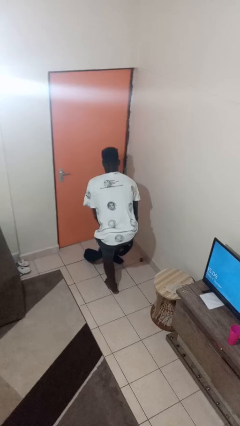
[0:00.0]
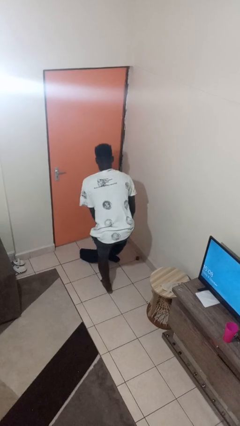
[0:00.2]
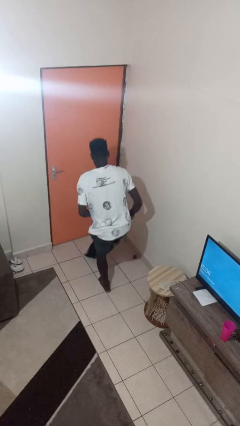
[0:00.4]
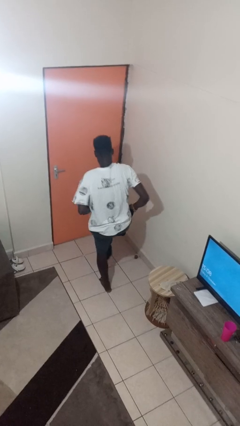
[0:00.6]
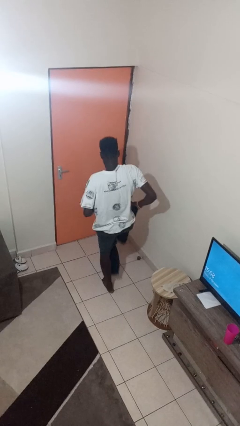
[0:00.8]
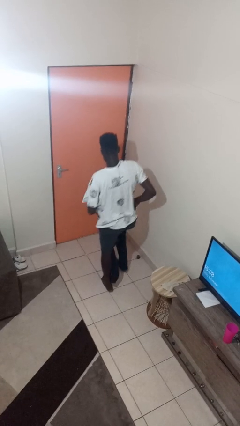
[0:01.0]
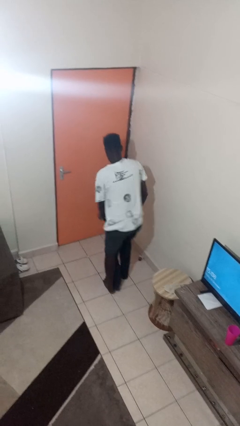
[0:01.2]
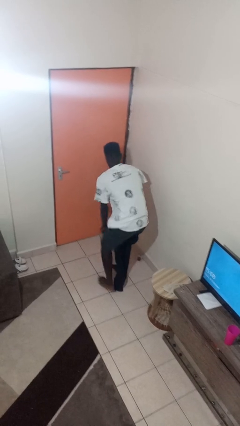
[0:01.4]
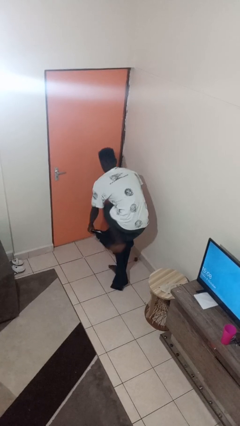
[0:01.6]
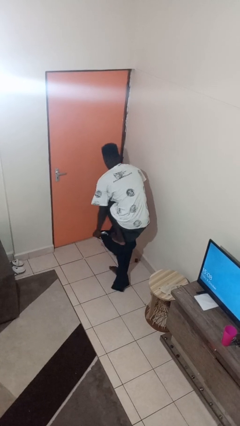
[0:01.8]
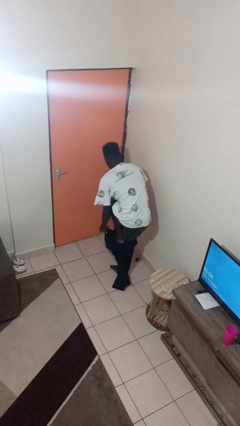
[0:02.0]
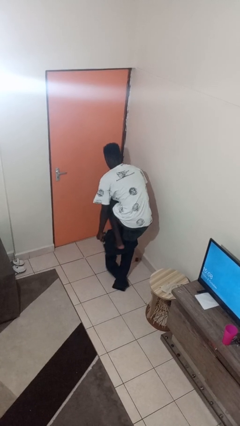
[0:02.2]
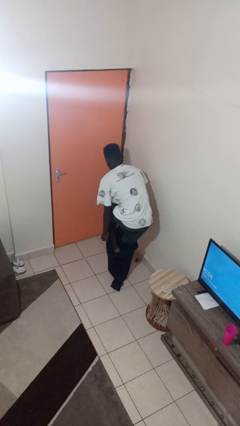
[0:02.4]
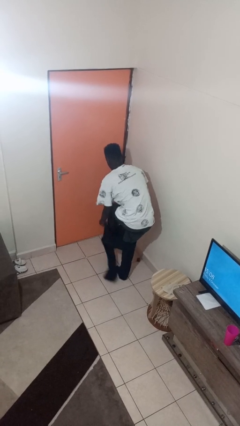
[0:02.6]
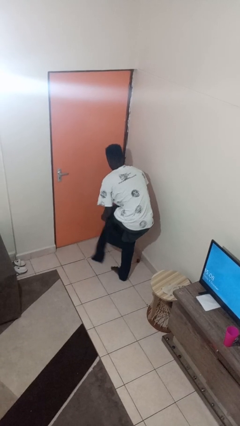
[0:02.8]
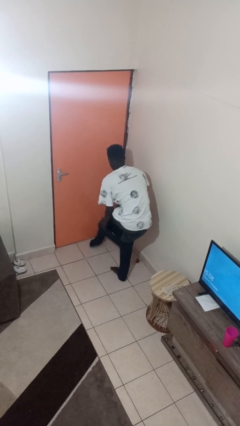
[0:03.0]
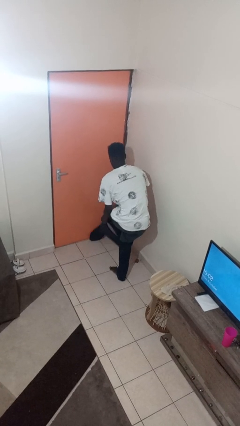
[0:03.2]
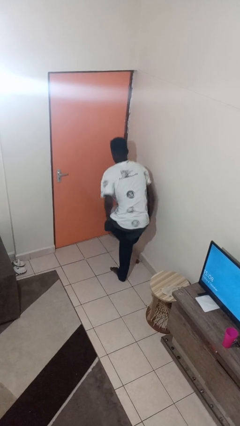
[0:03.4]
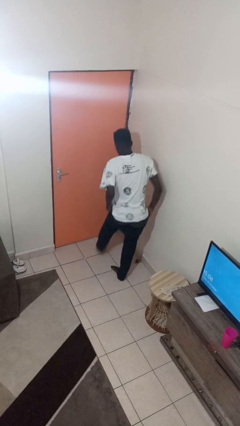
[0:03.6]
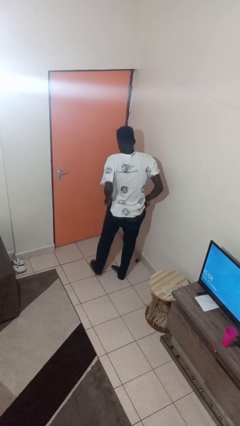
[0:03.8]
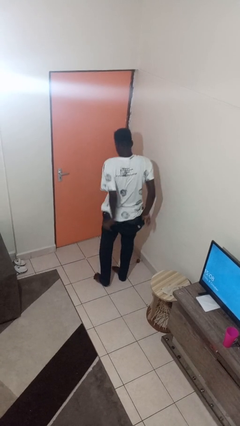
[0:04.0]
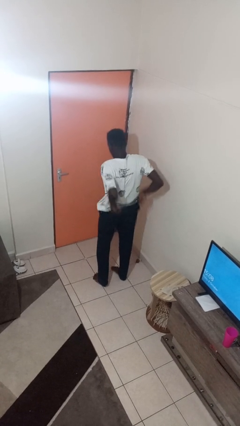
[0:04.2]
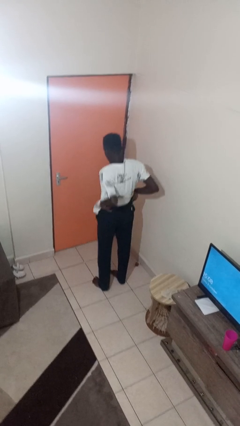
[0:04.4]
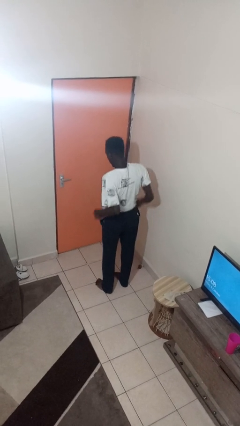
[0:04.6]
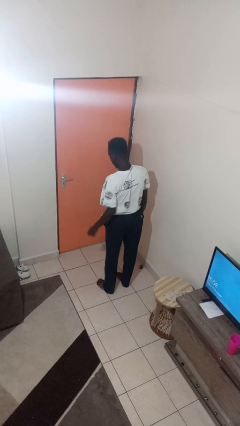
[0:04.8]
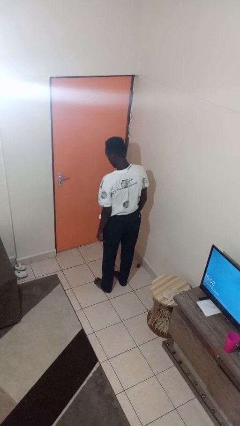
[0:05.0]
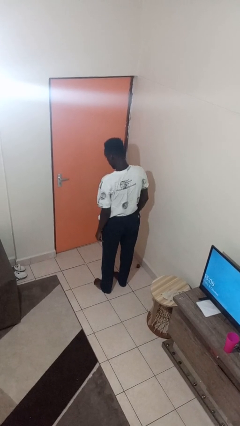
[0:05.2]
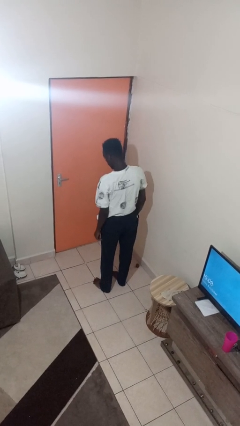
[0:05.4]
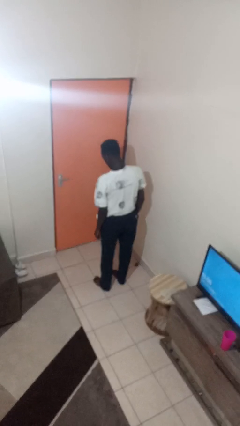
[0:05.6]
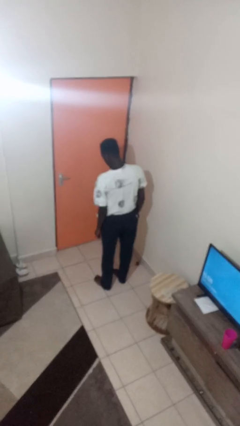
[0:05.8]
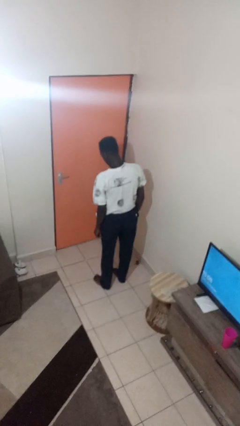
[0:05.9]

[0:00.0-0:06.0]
person puts on pants

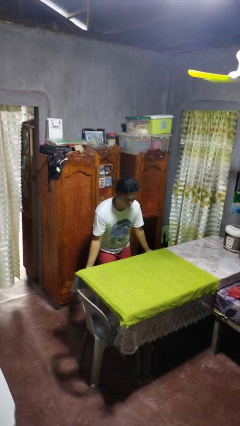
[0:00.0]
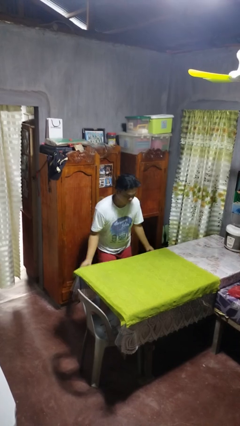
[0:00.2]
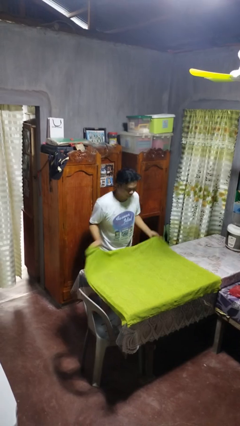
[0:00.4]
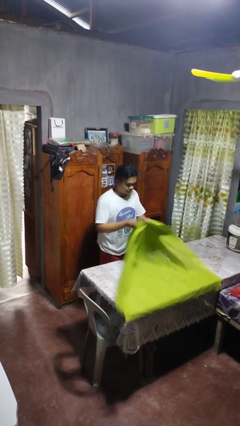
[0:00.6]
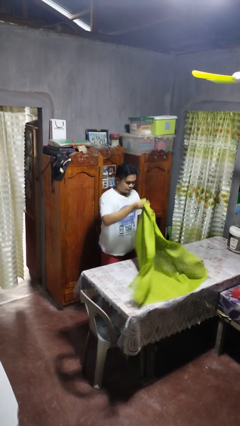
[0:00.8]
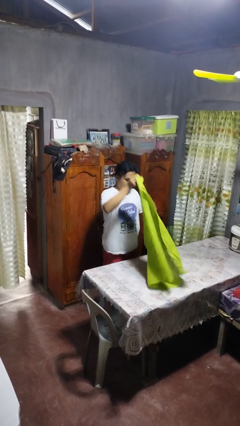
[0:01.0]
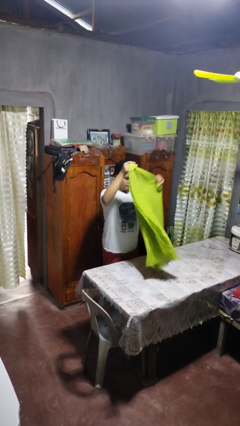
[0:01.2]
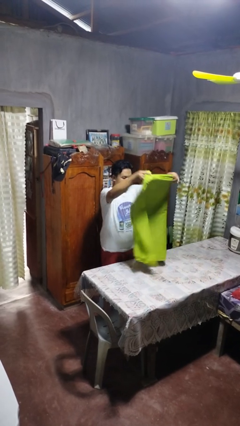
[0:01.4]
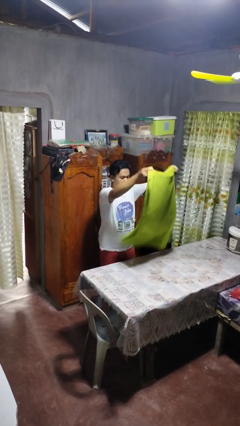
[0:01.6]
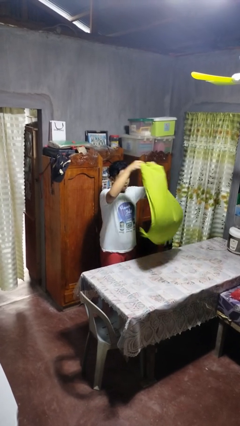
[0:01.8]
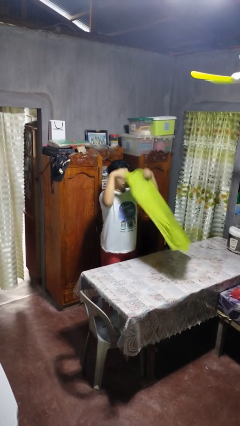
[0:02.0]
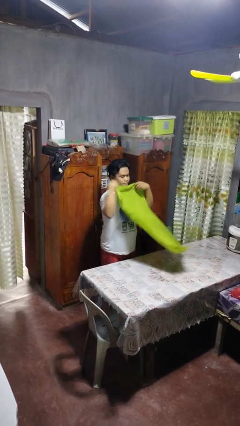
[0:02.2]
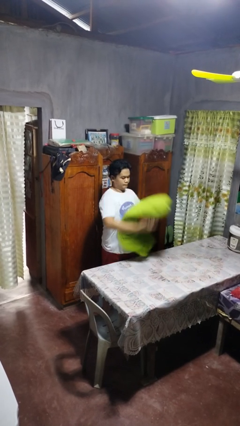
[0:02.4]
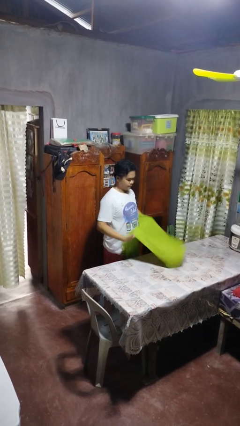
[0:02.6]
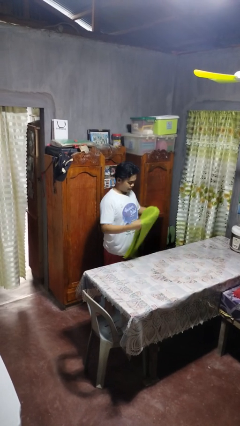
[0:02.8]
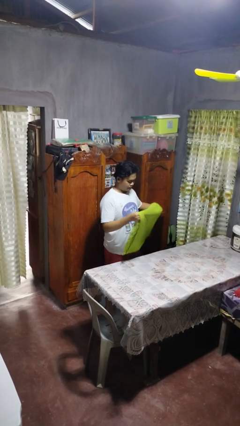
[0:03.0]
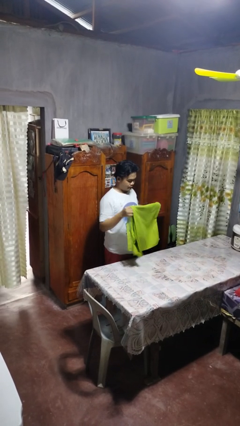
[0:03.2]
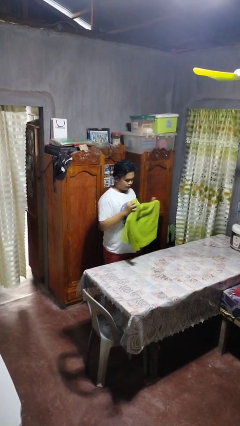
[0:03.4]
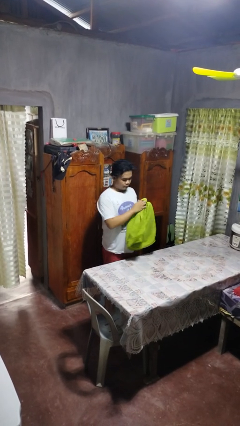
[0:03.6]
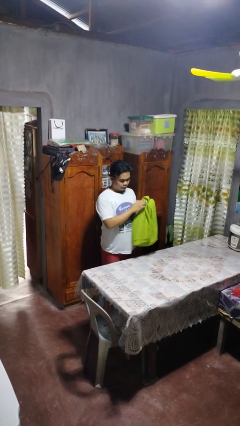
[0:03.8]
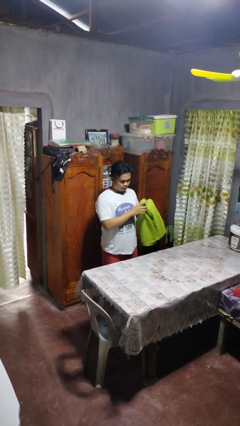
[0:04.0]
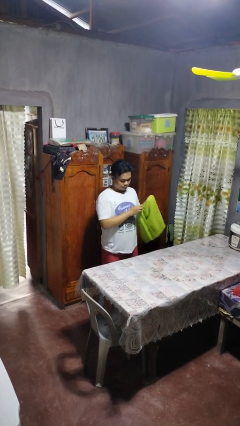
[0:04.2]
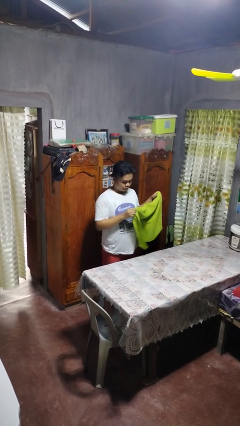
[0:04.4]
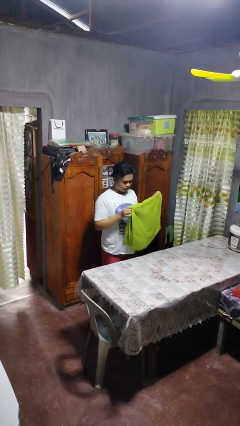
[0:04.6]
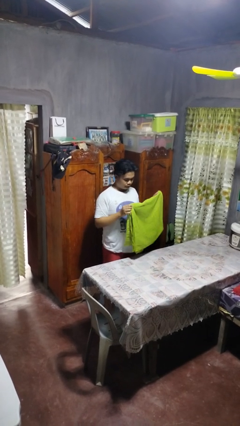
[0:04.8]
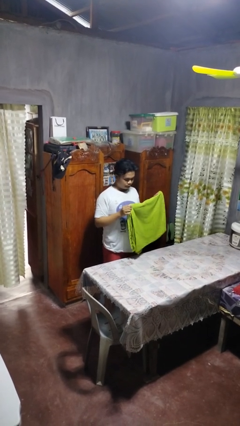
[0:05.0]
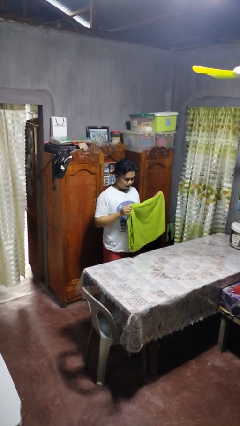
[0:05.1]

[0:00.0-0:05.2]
person folds tablecloth

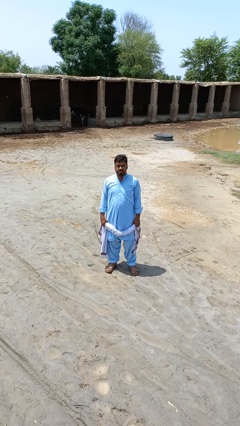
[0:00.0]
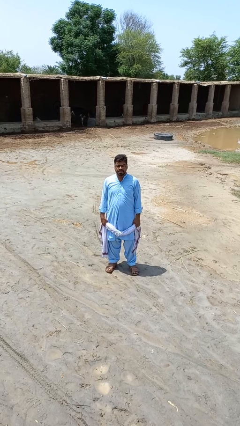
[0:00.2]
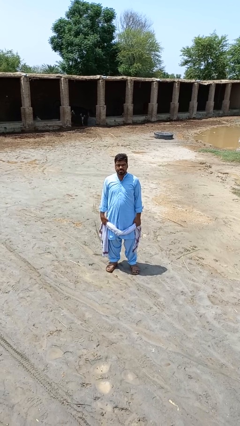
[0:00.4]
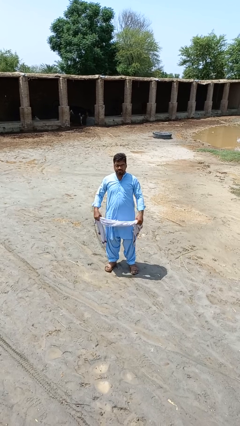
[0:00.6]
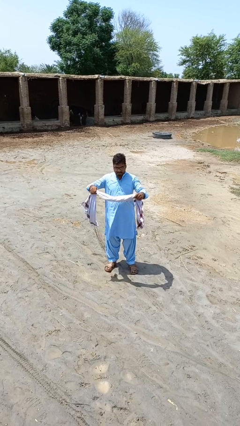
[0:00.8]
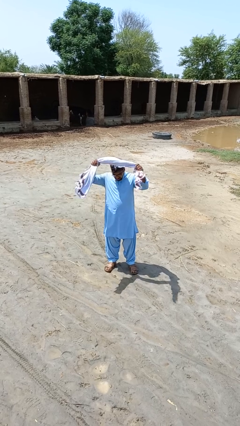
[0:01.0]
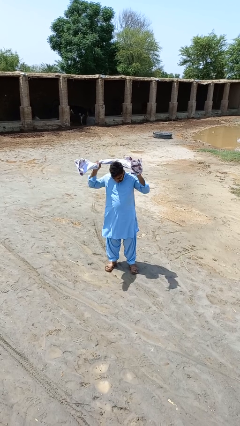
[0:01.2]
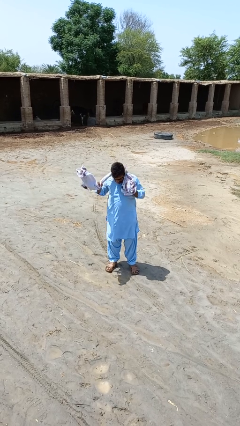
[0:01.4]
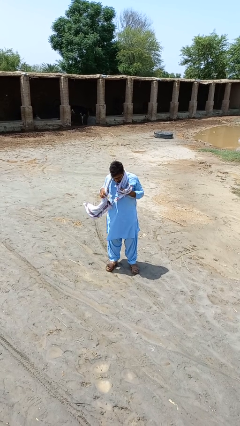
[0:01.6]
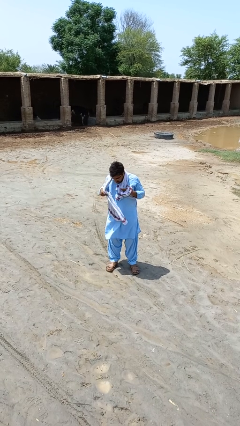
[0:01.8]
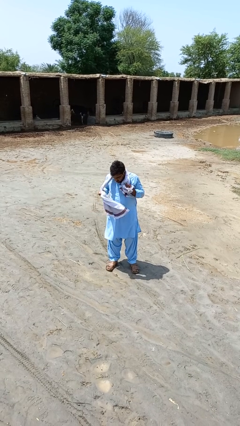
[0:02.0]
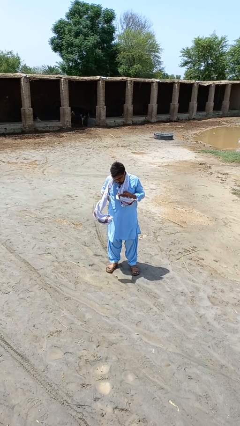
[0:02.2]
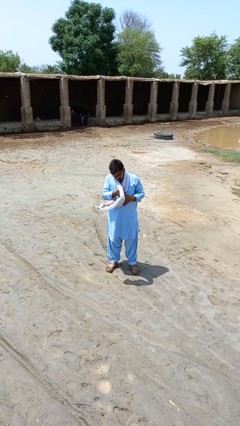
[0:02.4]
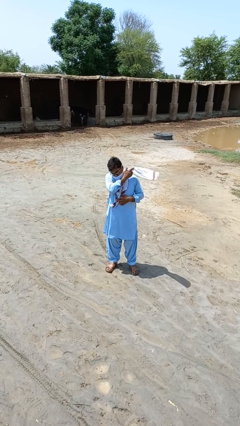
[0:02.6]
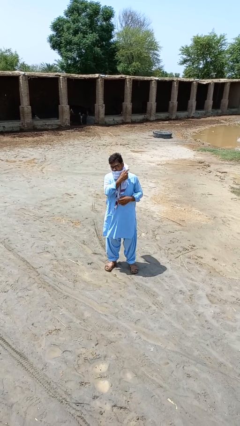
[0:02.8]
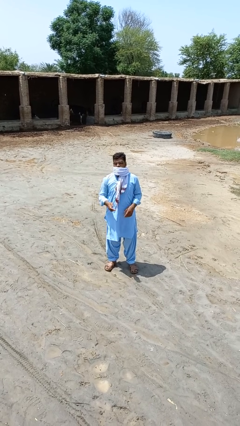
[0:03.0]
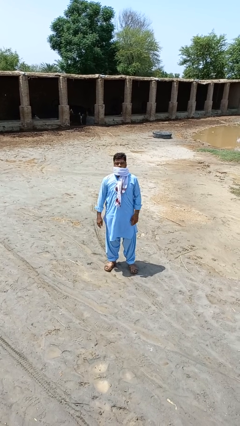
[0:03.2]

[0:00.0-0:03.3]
person puts on scarf

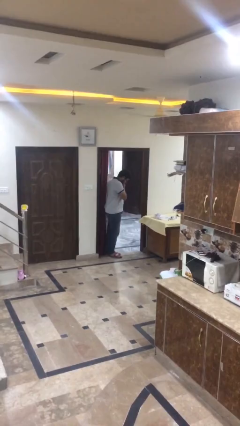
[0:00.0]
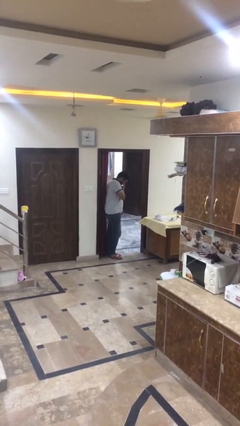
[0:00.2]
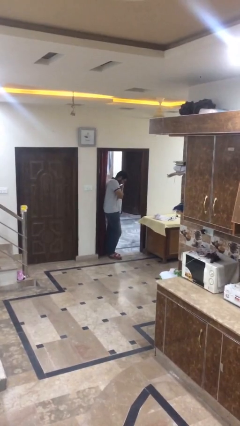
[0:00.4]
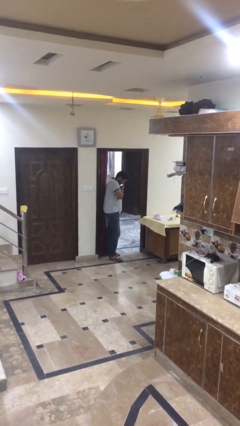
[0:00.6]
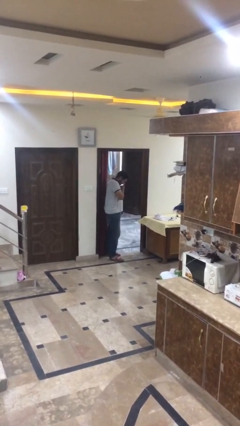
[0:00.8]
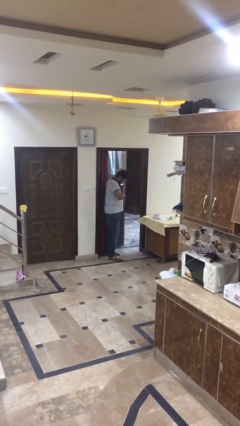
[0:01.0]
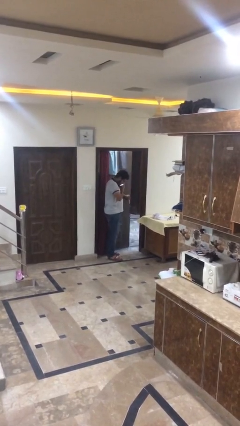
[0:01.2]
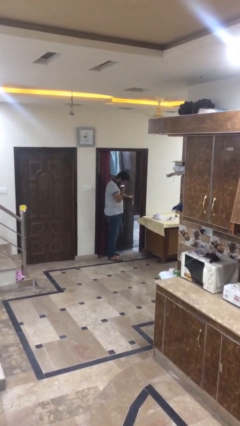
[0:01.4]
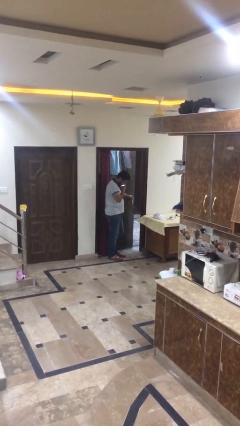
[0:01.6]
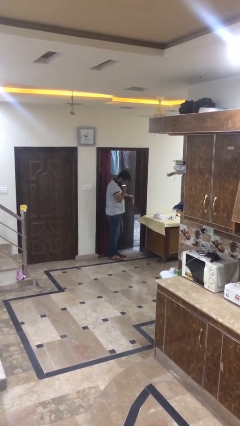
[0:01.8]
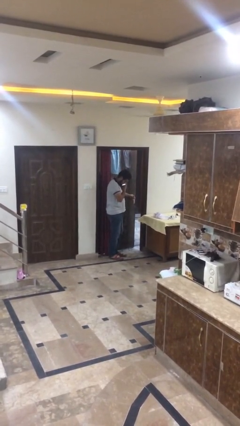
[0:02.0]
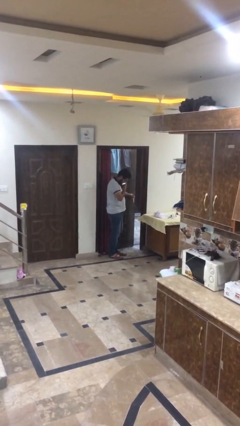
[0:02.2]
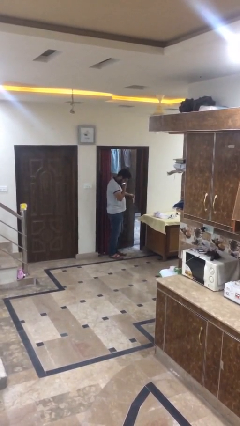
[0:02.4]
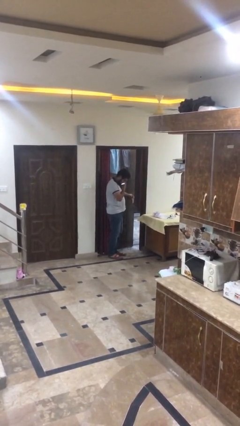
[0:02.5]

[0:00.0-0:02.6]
person closes facility door
